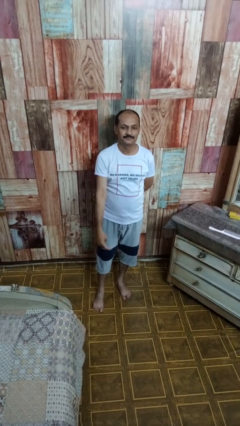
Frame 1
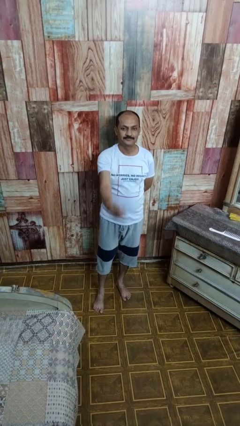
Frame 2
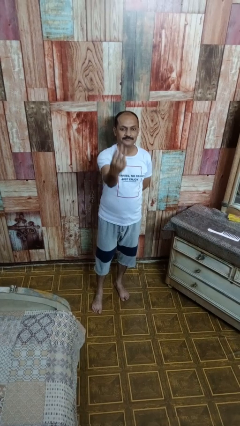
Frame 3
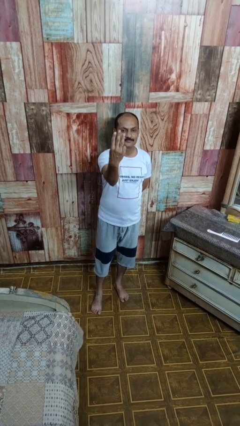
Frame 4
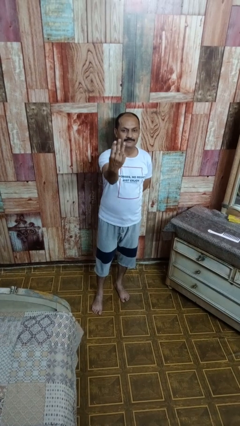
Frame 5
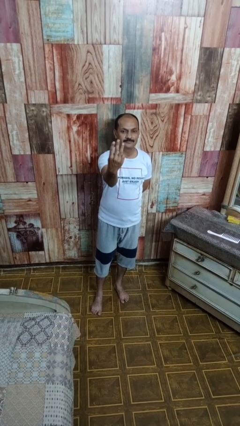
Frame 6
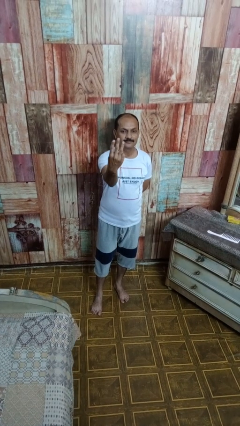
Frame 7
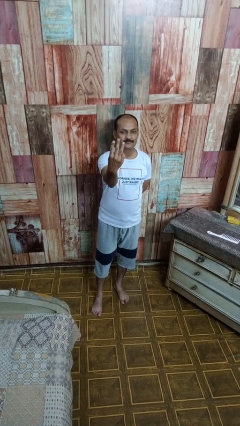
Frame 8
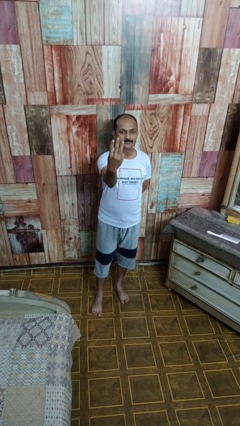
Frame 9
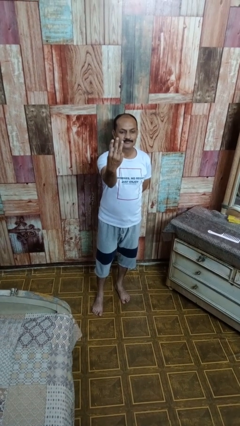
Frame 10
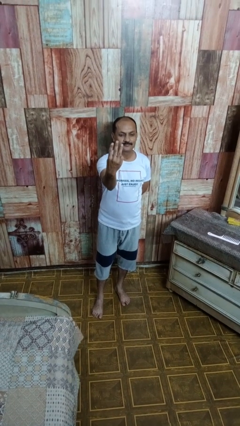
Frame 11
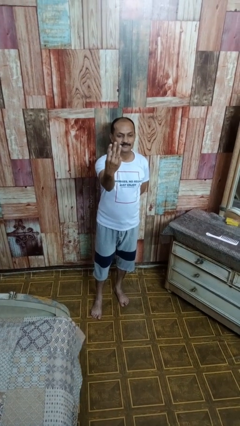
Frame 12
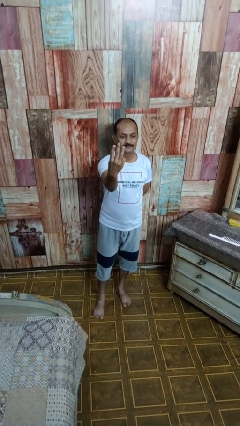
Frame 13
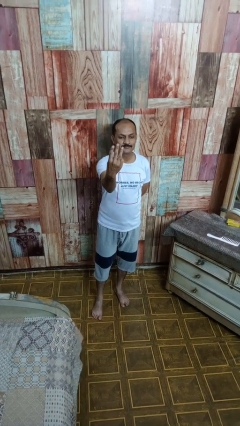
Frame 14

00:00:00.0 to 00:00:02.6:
person gestures number three

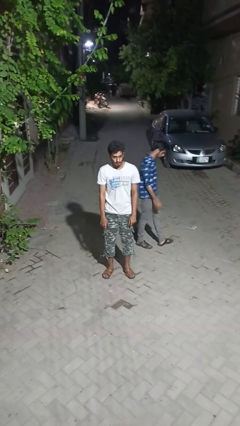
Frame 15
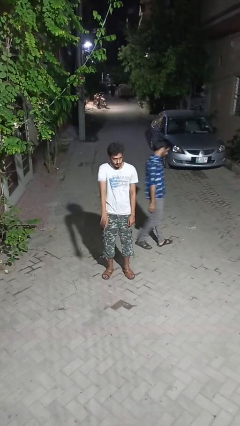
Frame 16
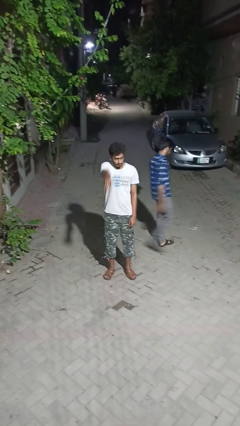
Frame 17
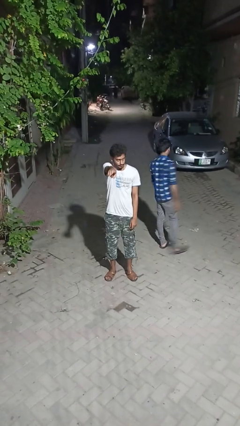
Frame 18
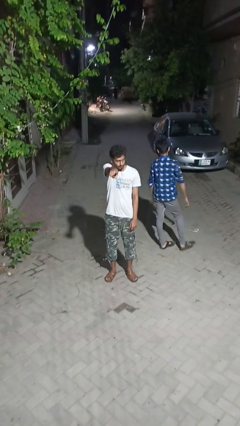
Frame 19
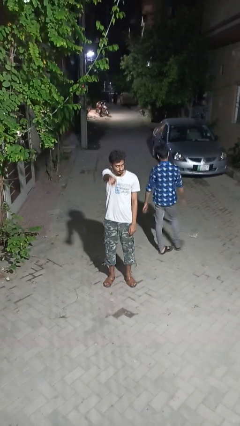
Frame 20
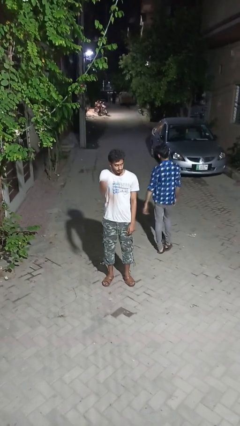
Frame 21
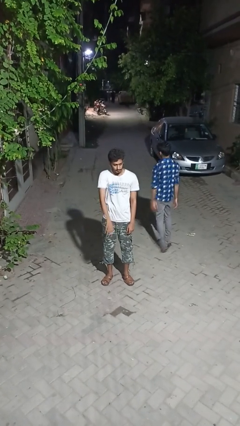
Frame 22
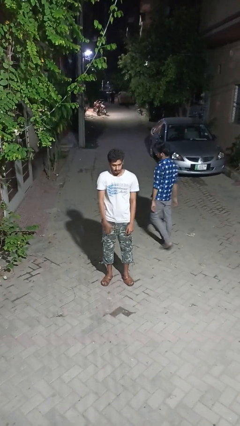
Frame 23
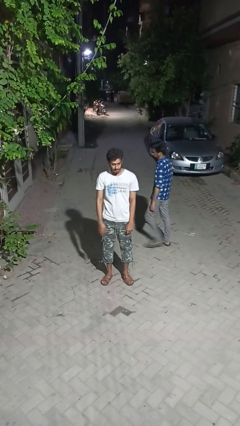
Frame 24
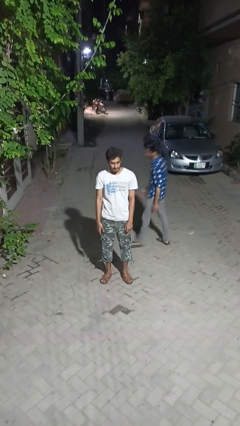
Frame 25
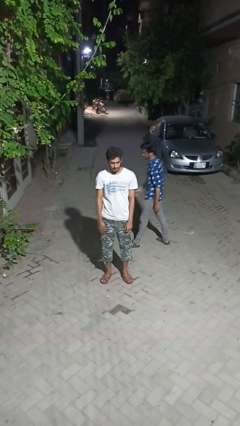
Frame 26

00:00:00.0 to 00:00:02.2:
person points at person

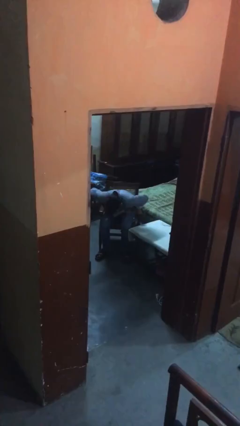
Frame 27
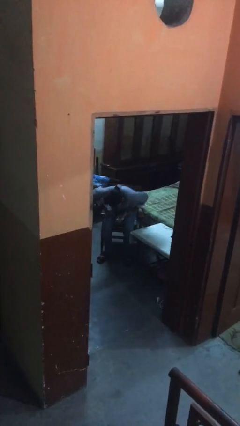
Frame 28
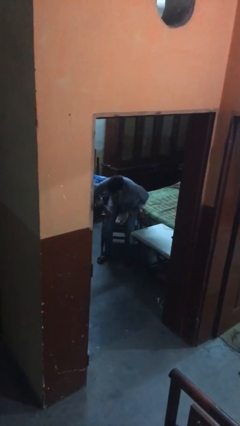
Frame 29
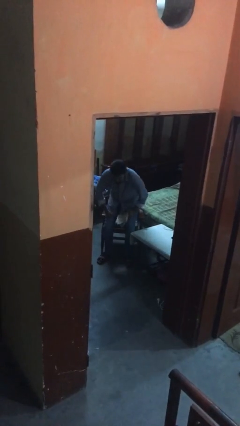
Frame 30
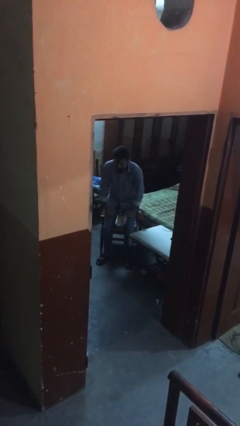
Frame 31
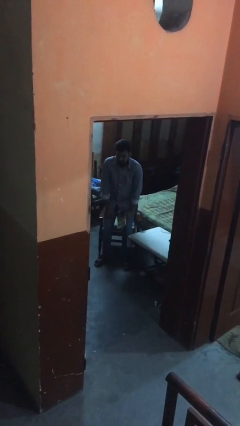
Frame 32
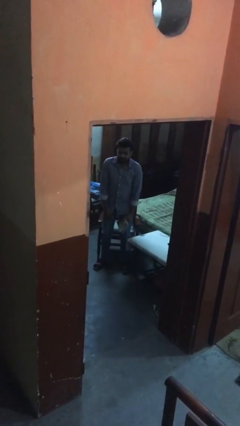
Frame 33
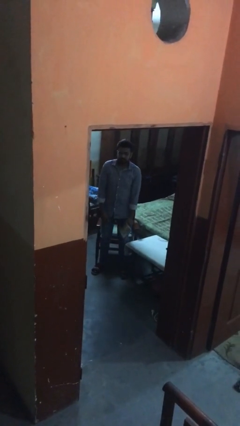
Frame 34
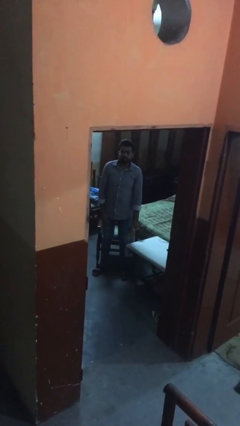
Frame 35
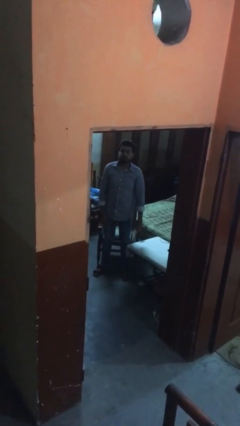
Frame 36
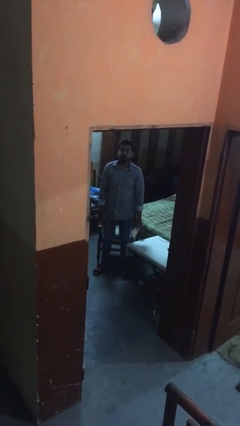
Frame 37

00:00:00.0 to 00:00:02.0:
person stands up

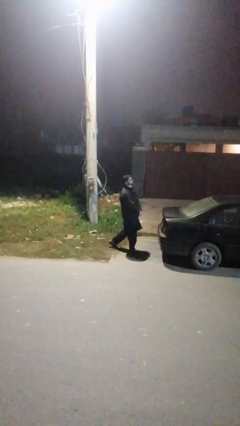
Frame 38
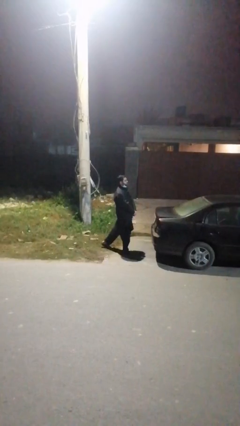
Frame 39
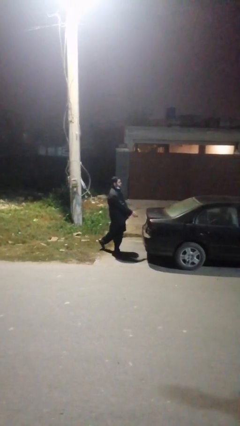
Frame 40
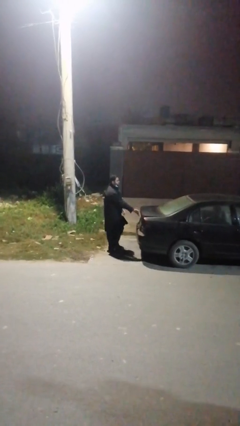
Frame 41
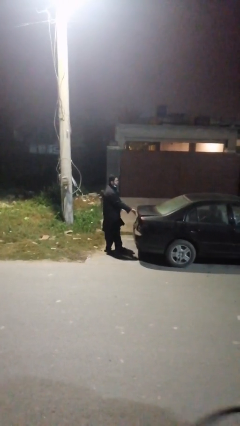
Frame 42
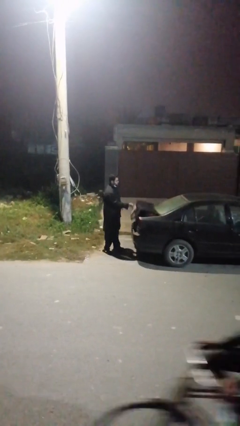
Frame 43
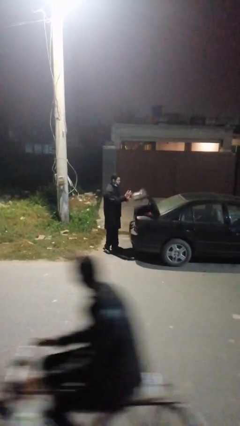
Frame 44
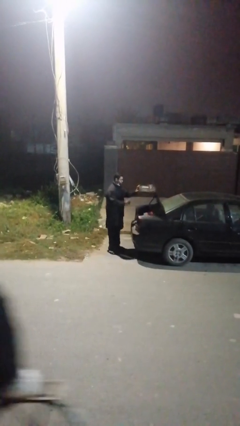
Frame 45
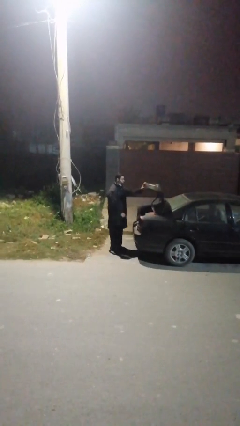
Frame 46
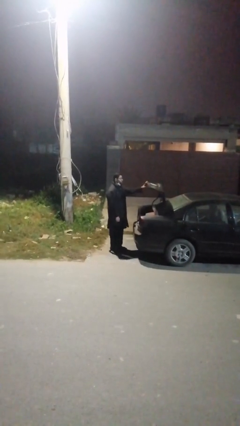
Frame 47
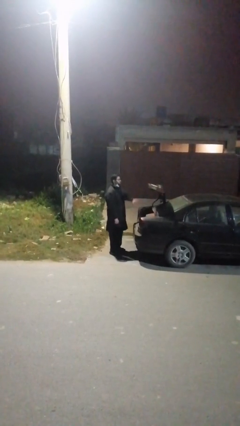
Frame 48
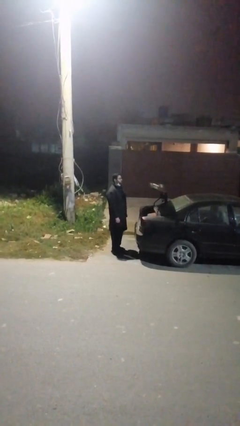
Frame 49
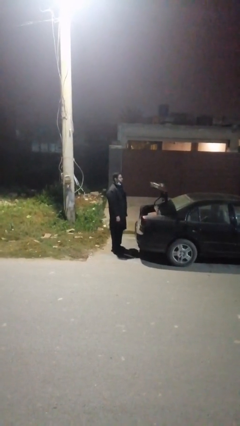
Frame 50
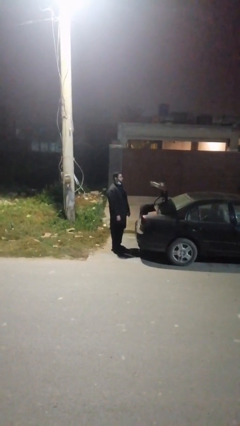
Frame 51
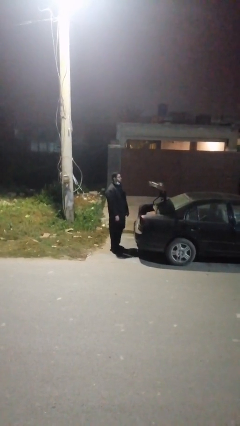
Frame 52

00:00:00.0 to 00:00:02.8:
person opens car trunk

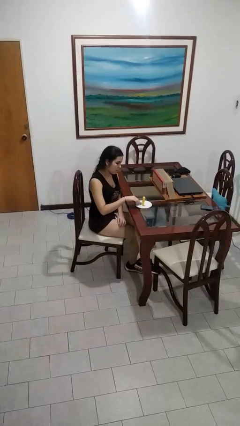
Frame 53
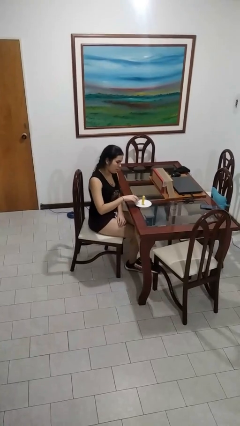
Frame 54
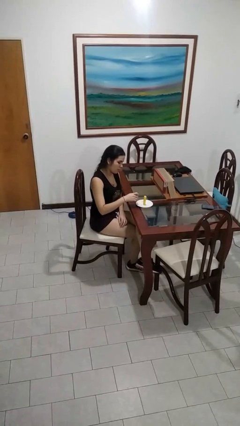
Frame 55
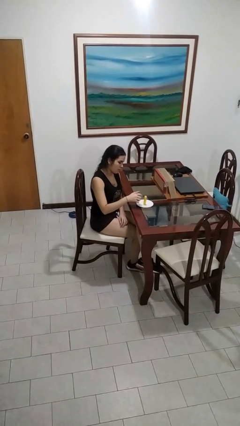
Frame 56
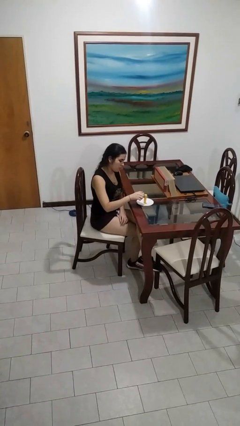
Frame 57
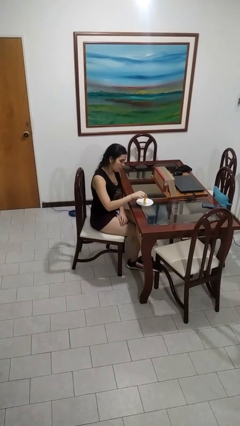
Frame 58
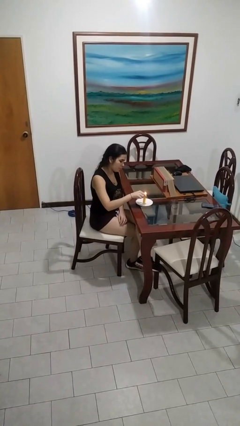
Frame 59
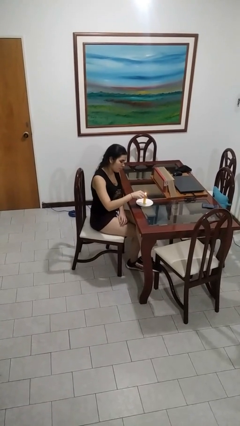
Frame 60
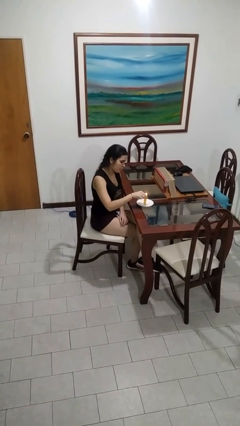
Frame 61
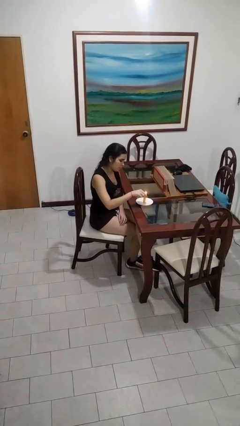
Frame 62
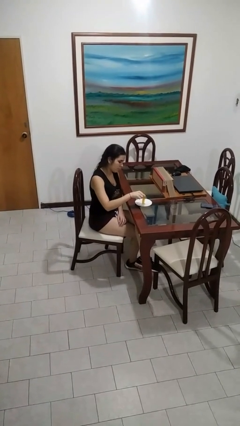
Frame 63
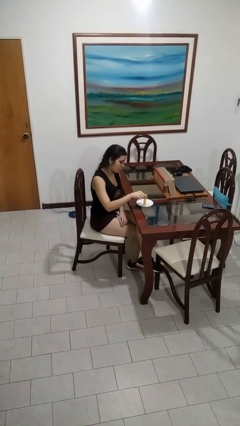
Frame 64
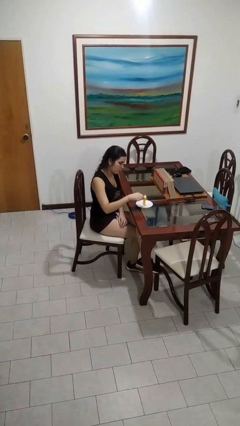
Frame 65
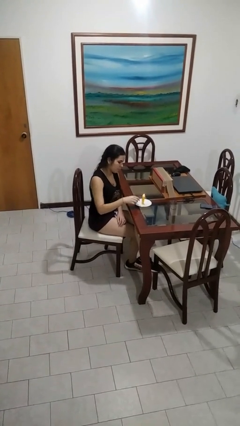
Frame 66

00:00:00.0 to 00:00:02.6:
person lights candle

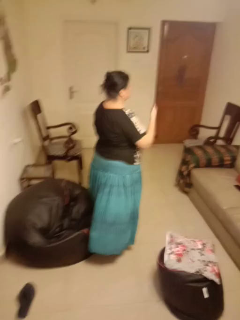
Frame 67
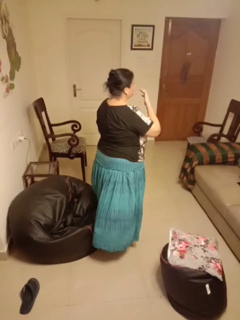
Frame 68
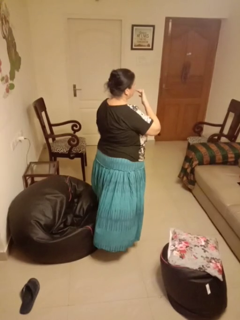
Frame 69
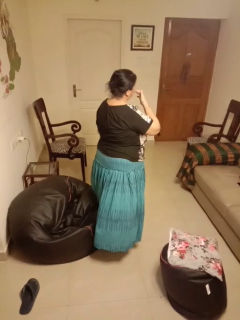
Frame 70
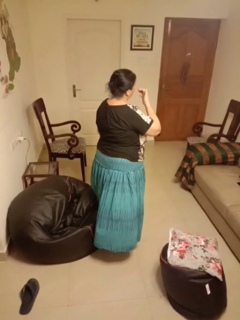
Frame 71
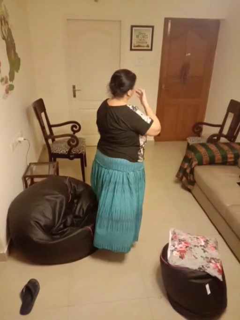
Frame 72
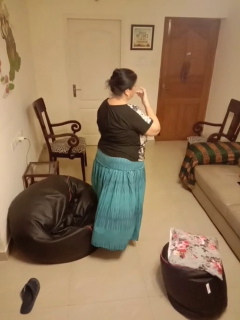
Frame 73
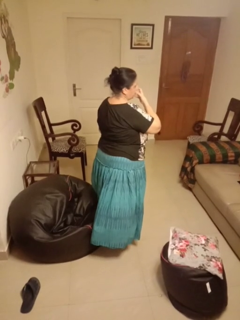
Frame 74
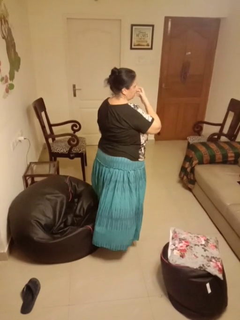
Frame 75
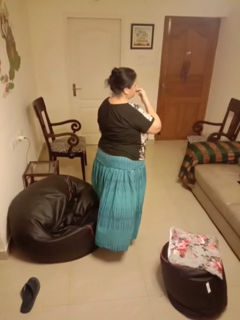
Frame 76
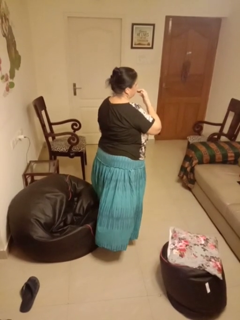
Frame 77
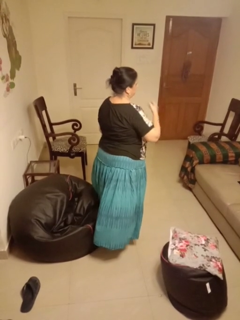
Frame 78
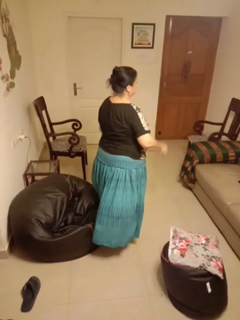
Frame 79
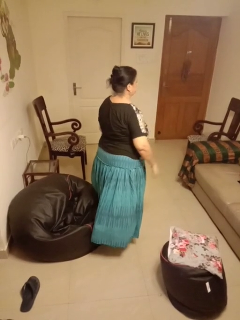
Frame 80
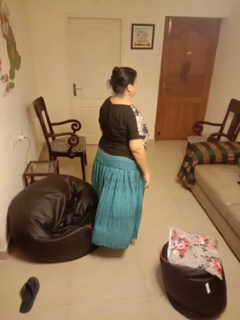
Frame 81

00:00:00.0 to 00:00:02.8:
person licks fingers

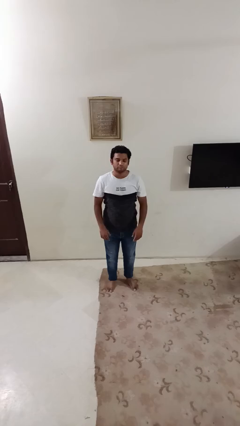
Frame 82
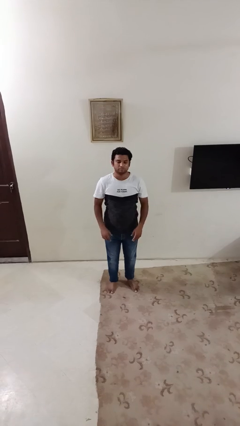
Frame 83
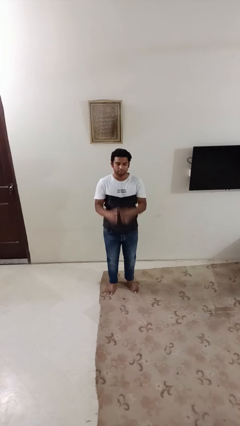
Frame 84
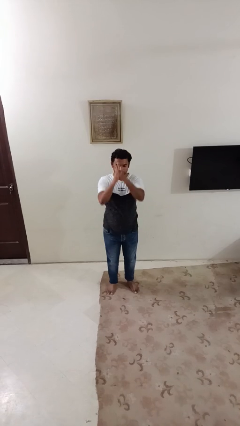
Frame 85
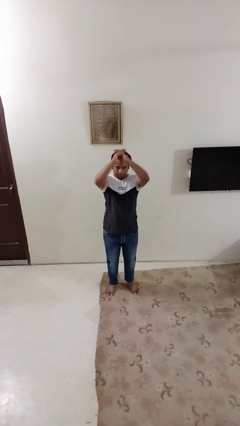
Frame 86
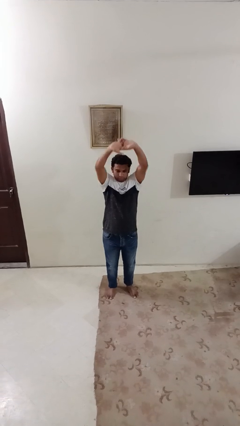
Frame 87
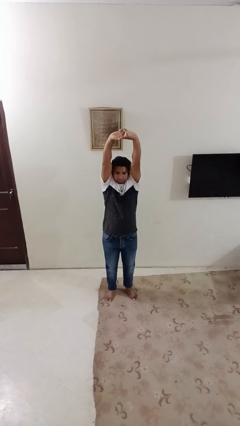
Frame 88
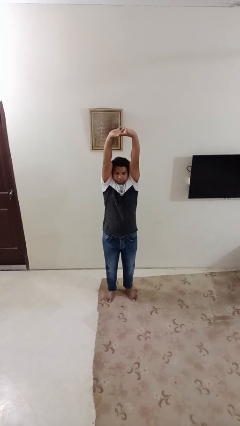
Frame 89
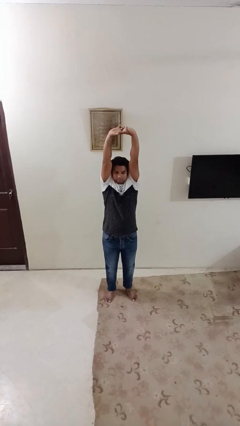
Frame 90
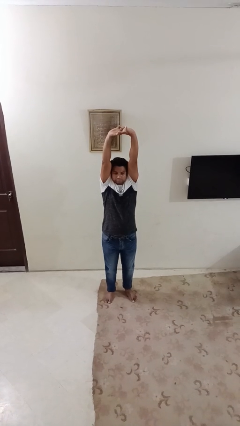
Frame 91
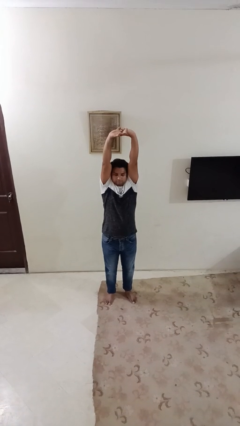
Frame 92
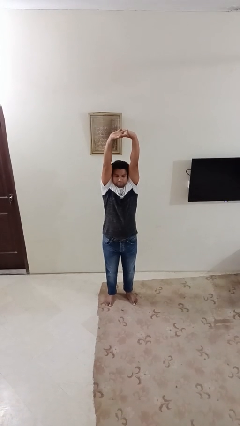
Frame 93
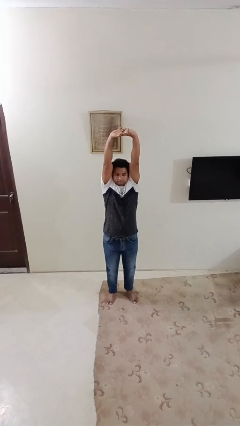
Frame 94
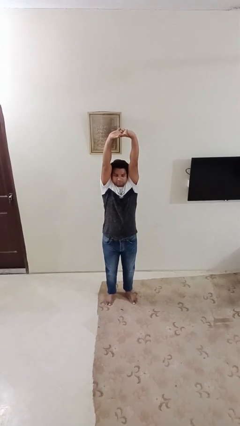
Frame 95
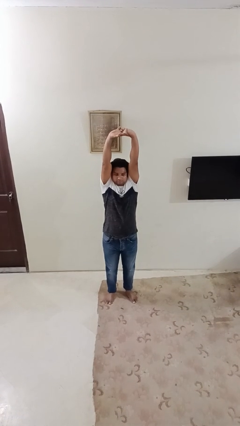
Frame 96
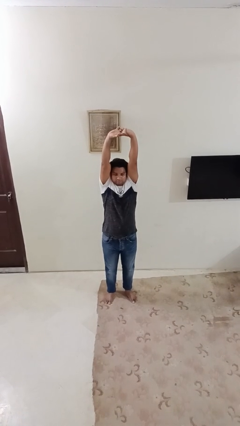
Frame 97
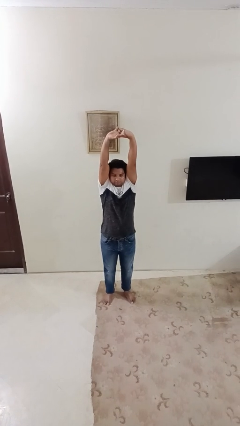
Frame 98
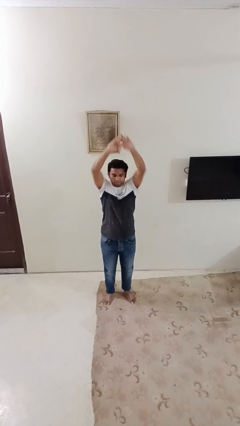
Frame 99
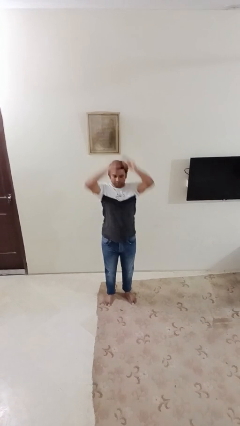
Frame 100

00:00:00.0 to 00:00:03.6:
person stretches arms over head
